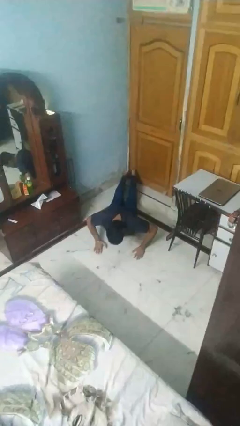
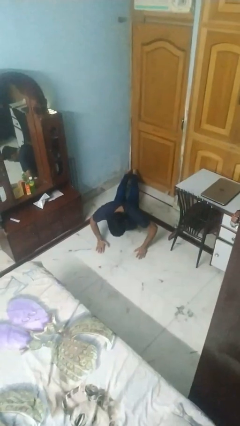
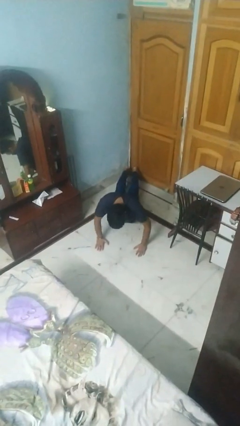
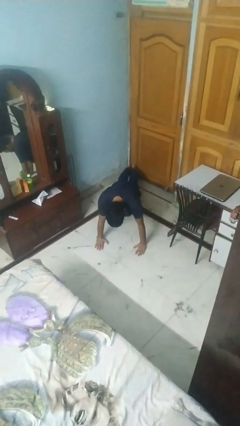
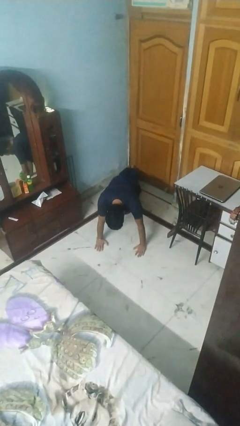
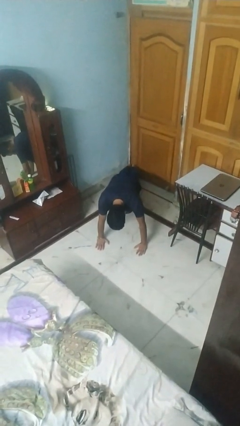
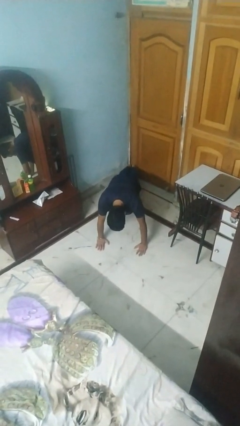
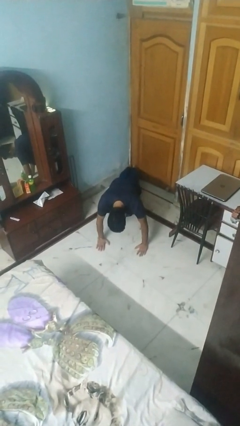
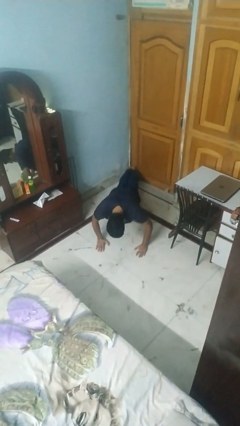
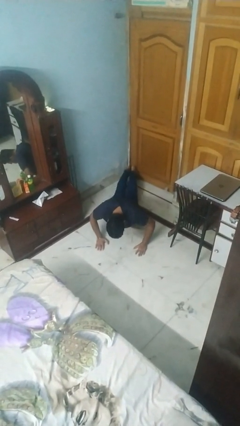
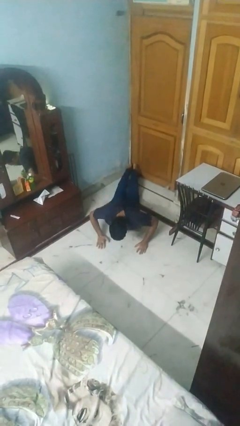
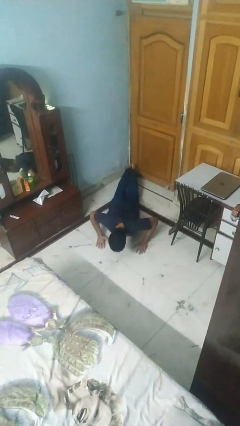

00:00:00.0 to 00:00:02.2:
person exercises with pushup

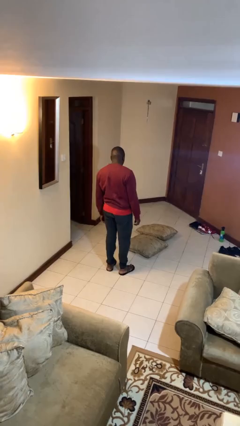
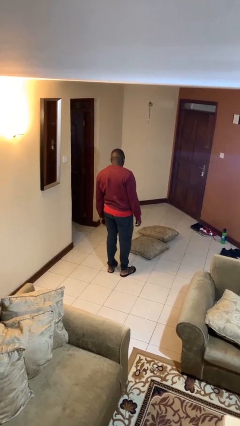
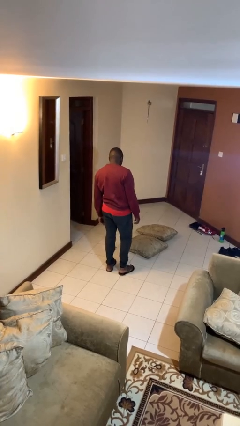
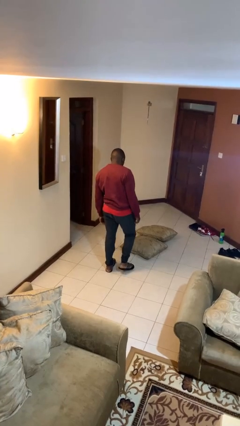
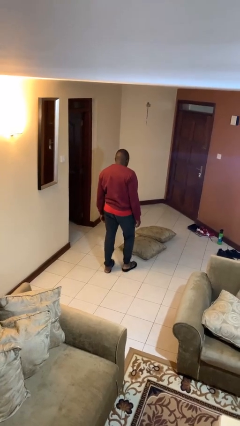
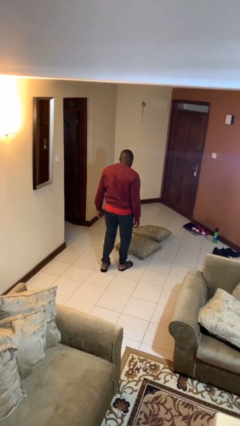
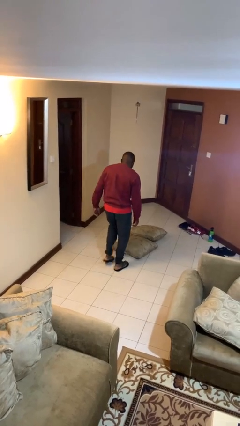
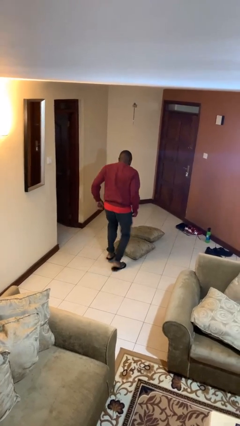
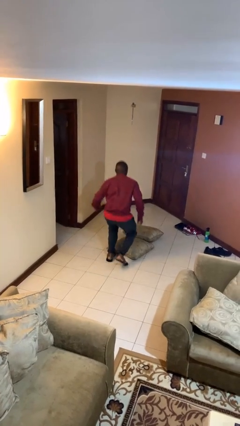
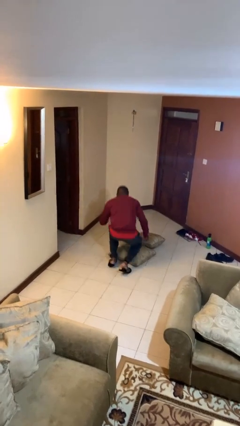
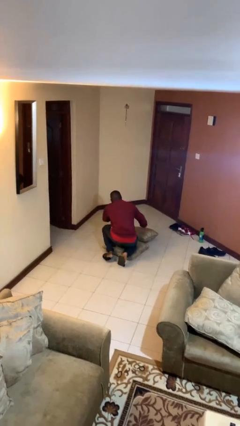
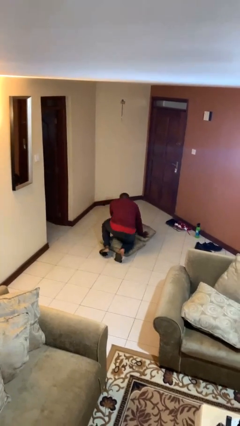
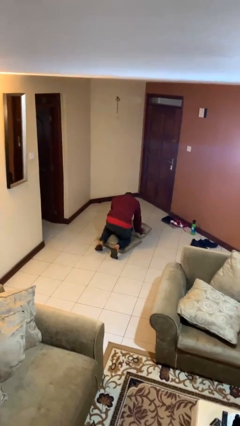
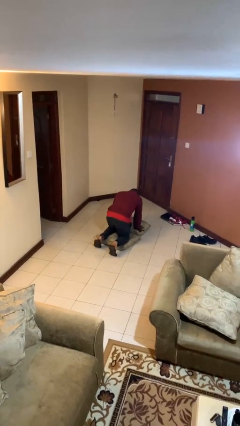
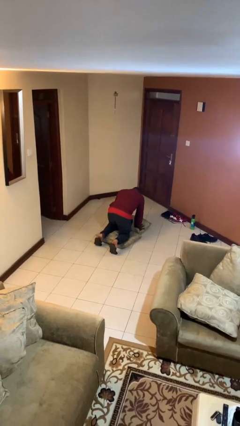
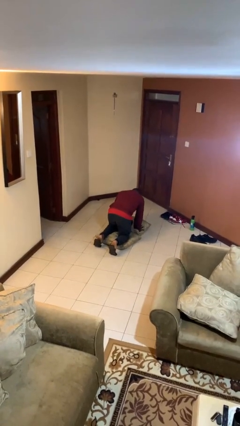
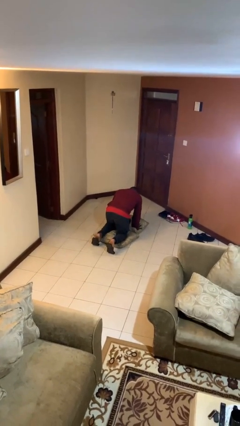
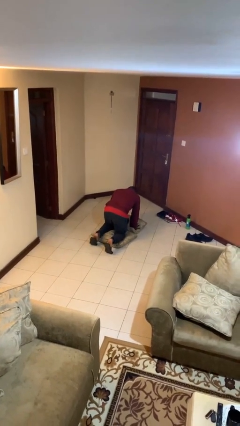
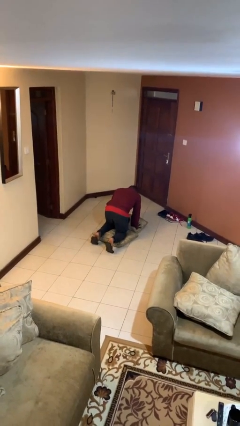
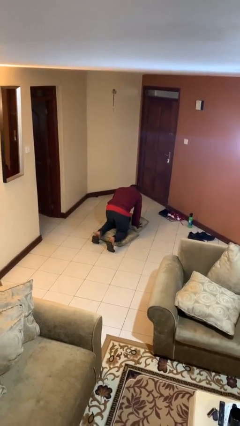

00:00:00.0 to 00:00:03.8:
person trips on object on floor

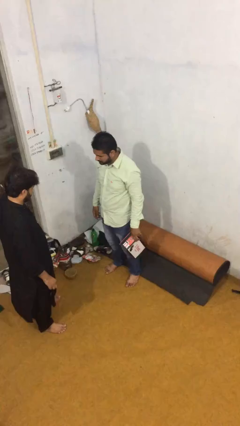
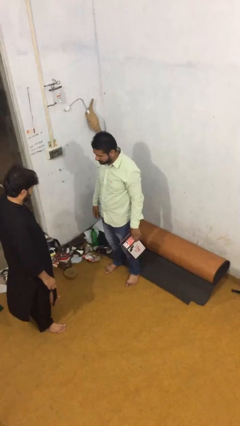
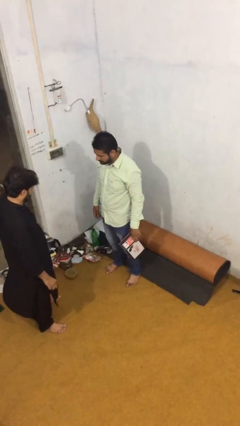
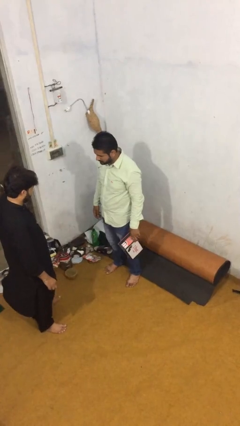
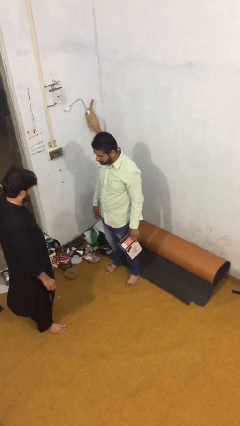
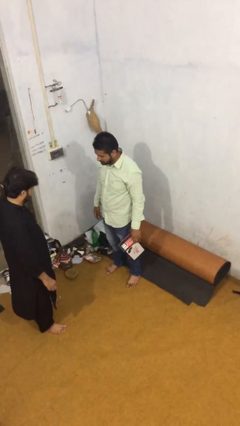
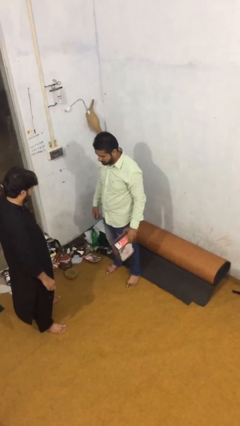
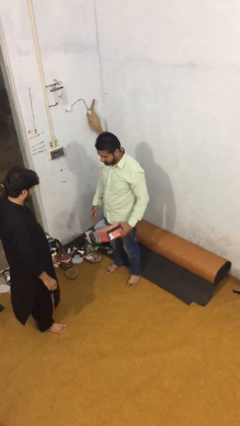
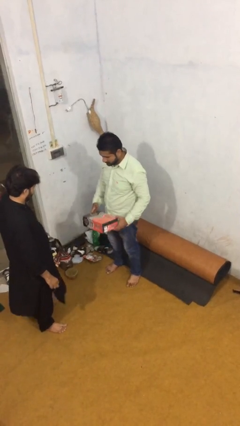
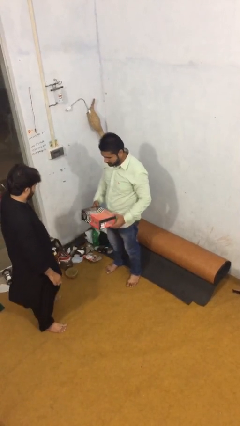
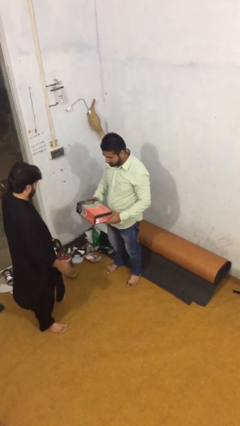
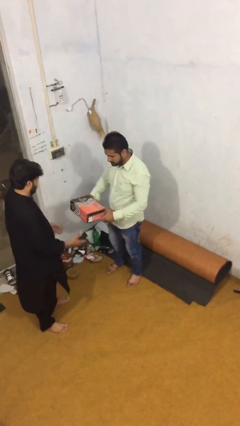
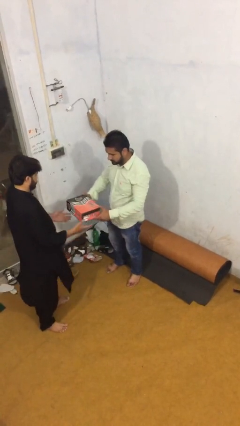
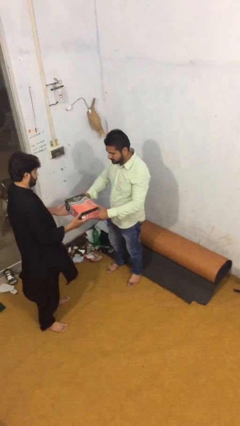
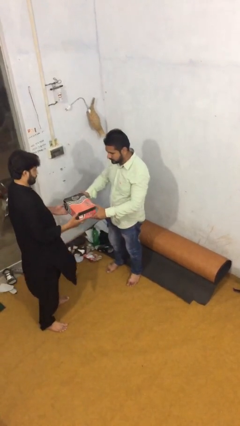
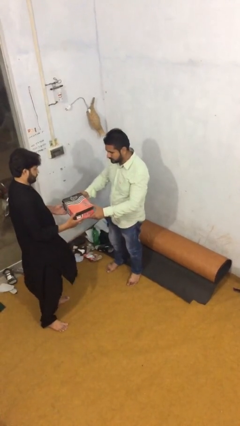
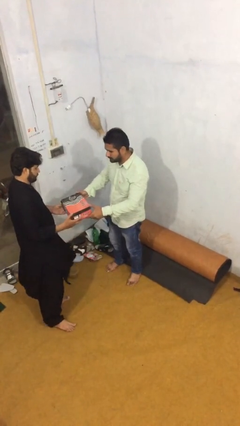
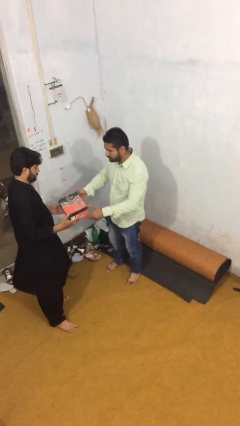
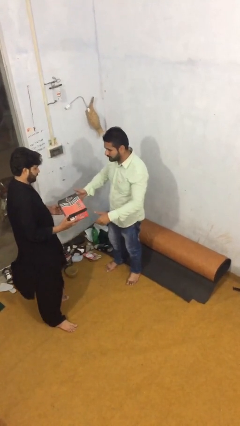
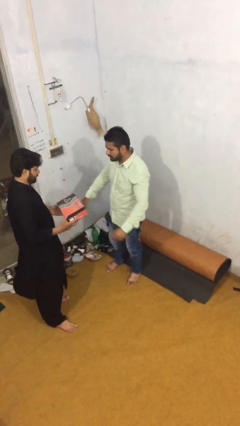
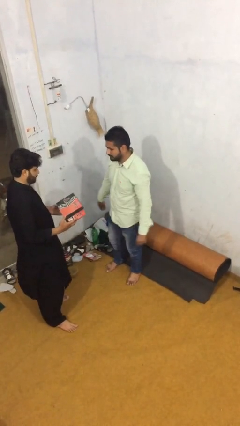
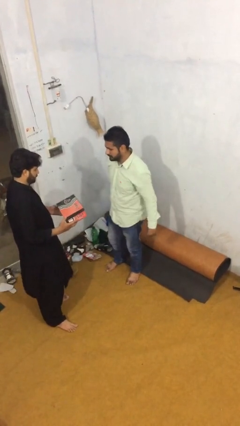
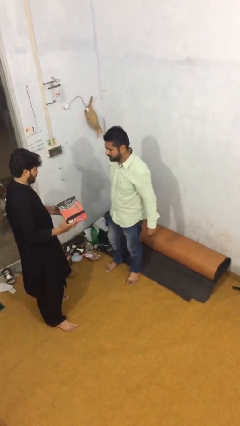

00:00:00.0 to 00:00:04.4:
person transfers object to person

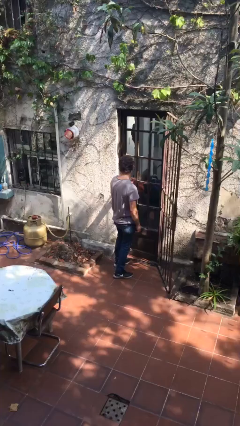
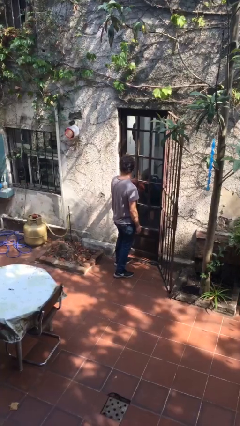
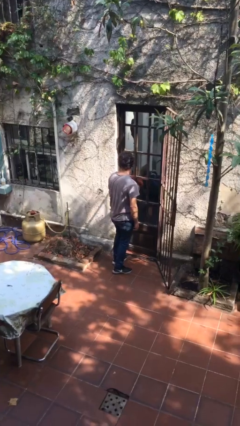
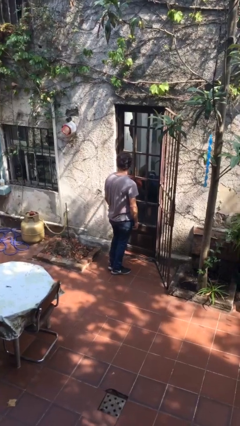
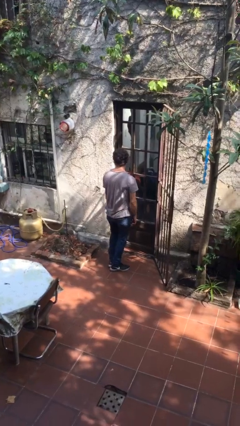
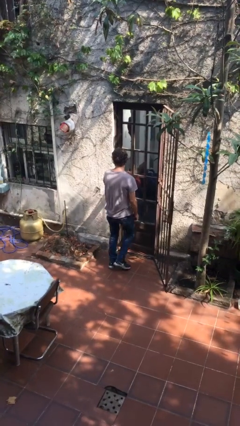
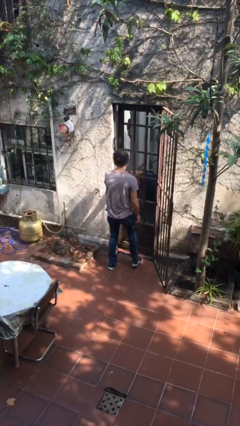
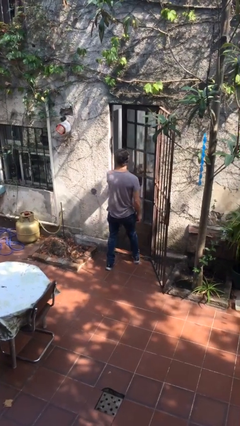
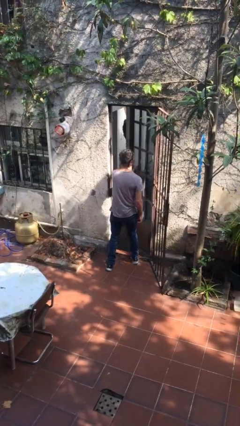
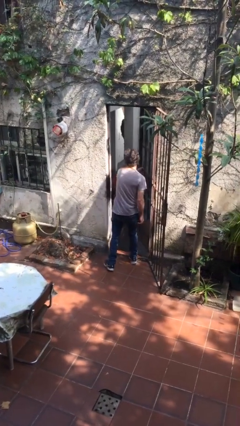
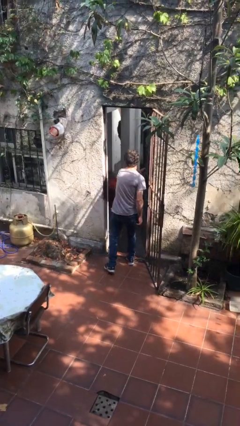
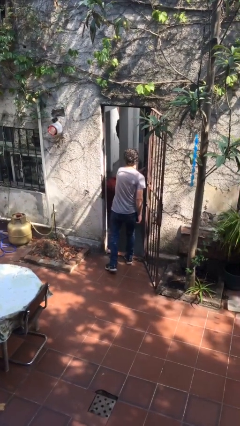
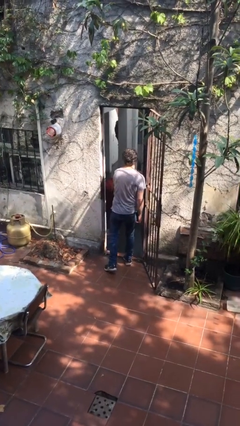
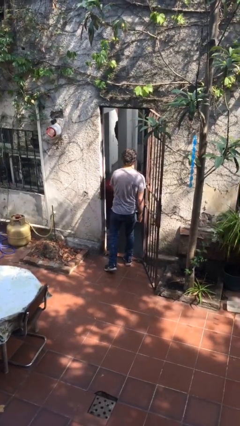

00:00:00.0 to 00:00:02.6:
person opens facility door

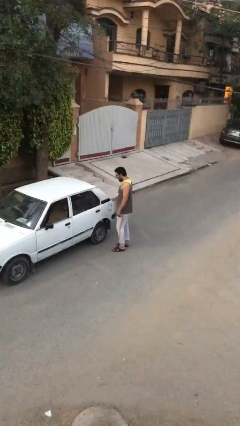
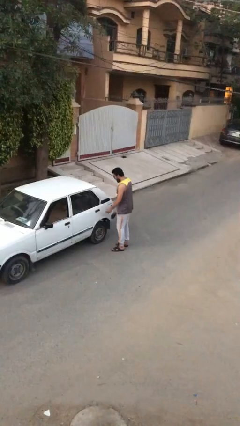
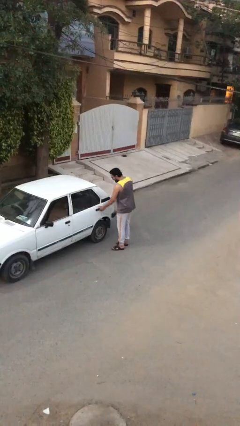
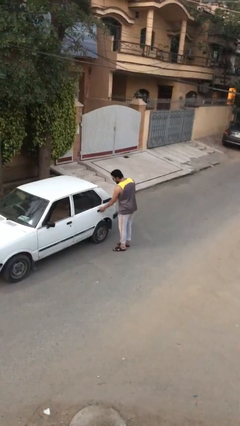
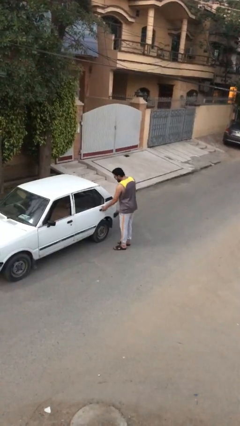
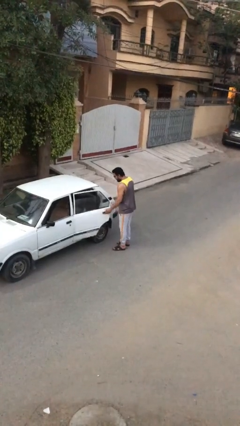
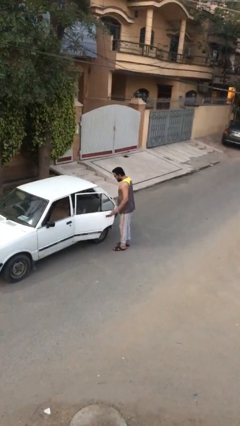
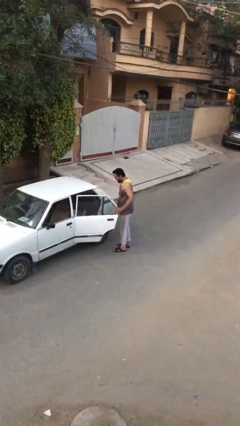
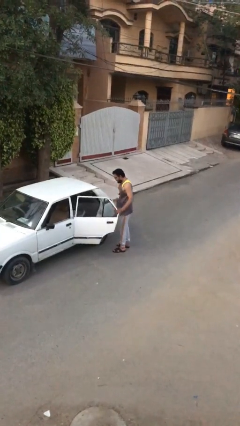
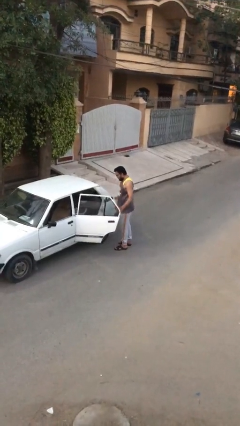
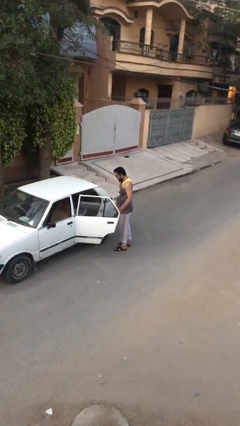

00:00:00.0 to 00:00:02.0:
person opens car door

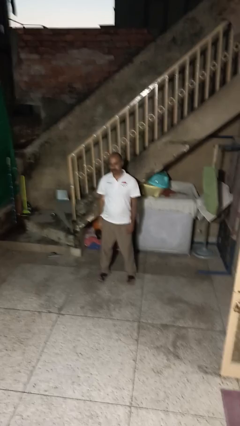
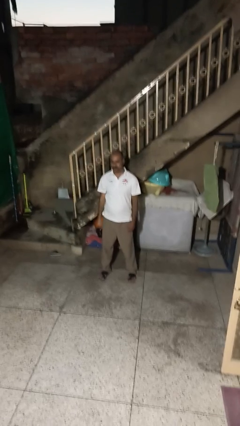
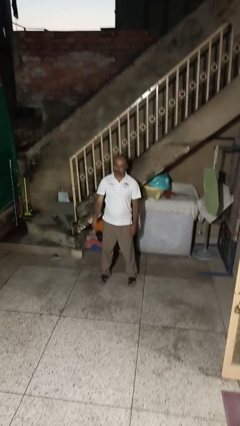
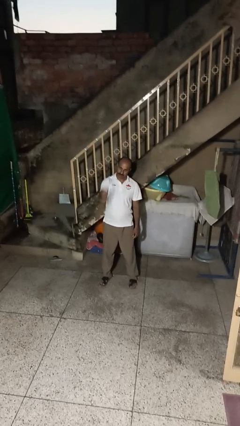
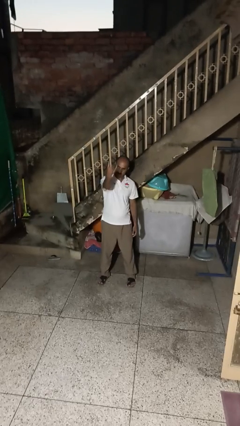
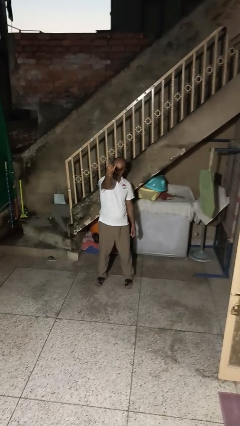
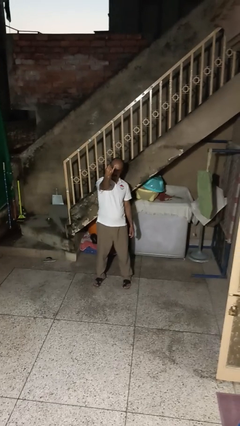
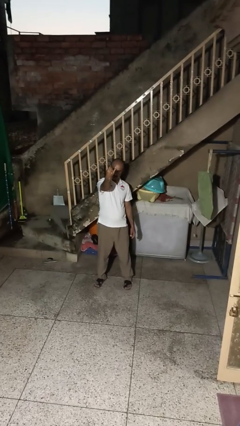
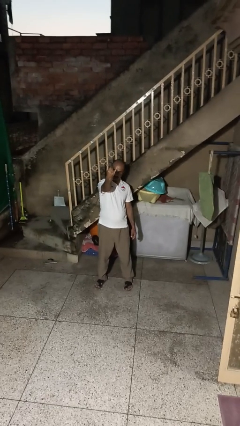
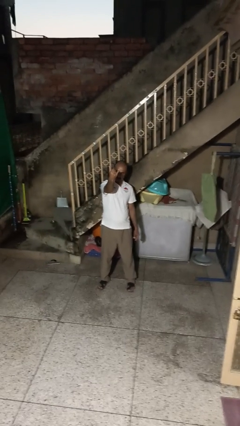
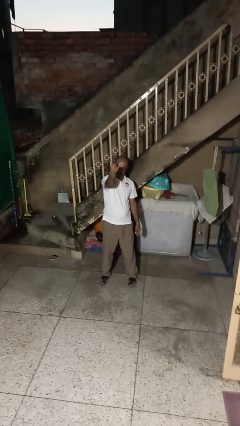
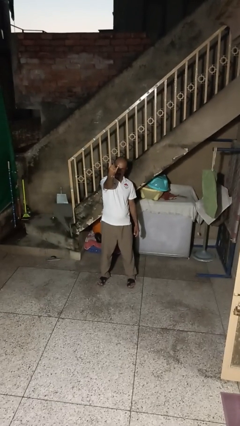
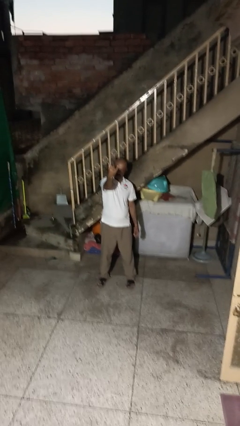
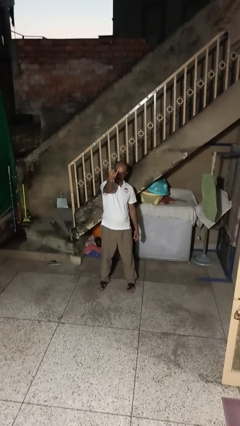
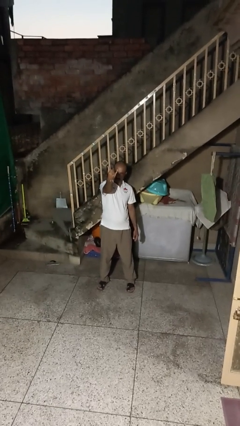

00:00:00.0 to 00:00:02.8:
person gestures hang loose
